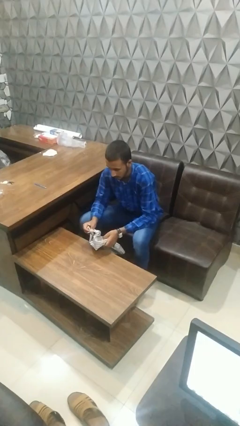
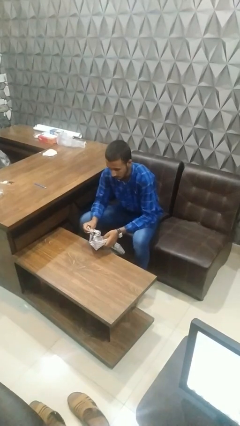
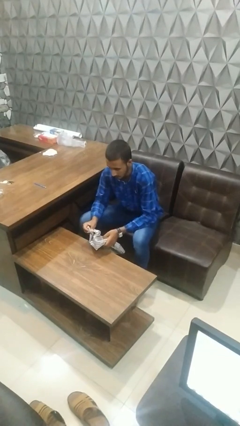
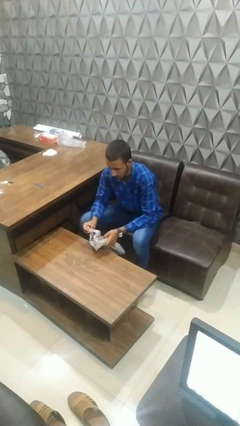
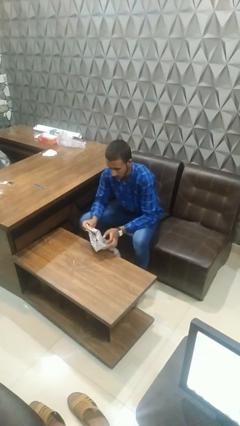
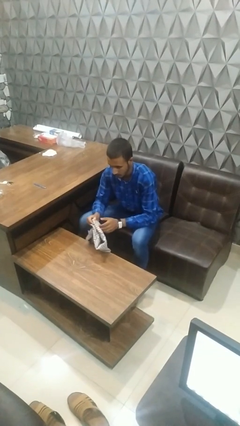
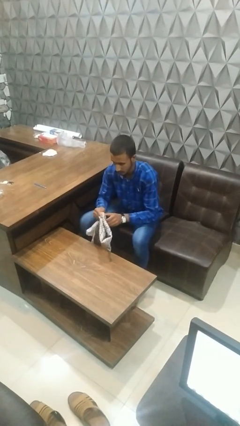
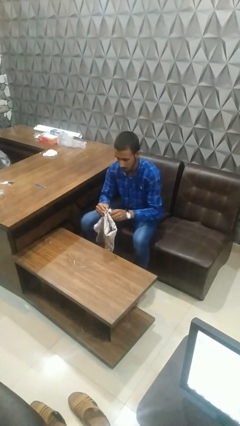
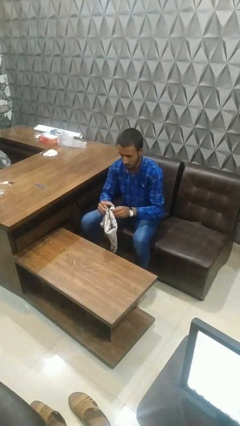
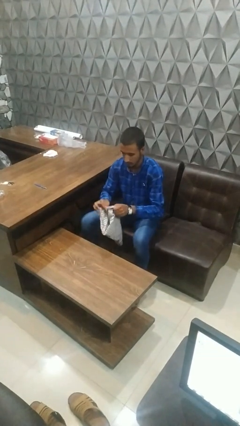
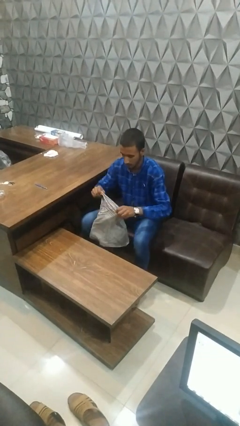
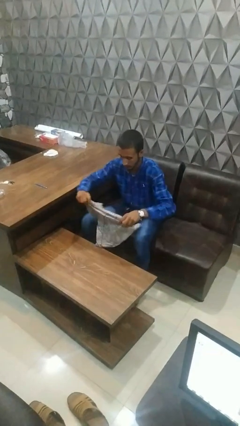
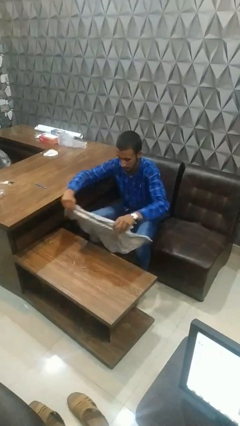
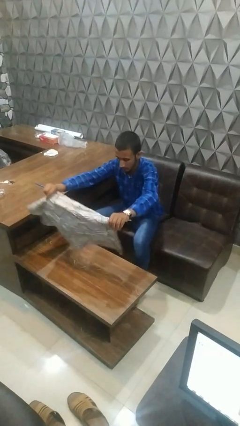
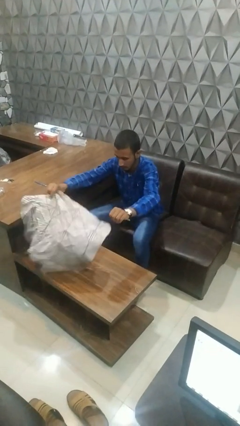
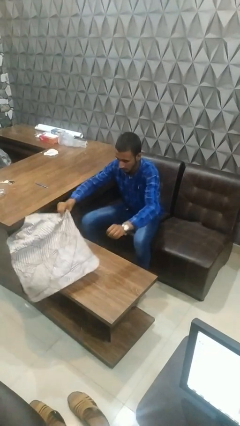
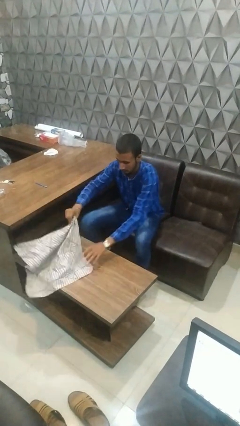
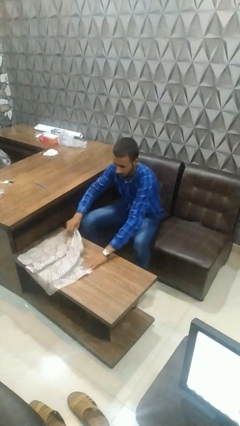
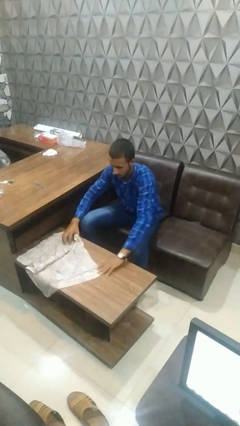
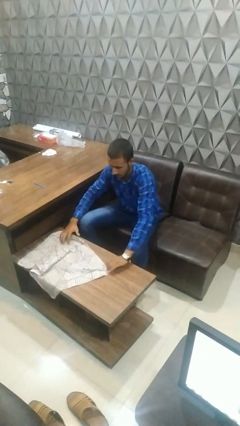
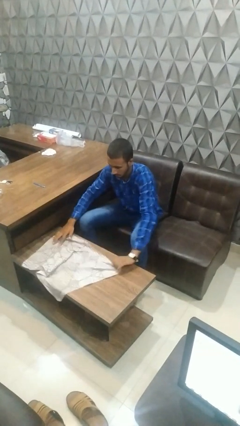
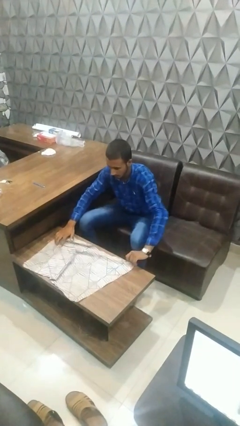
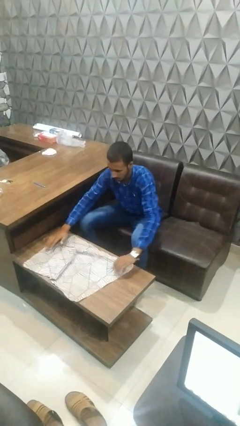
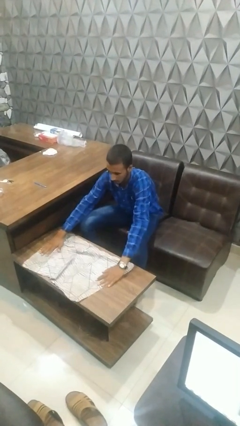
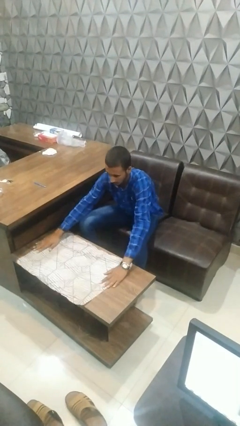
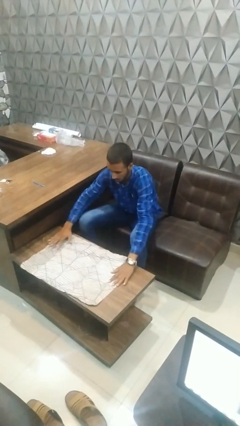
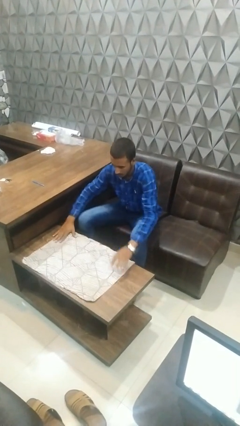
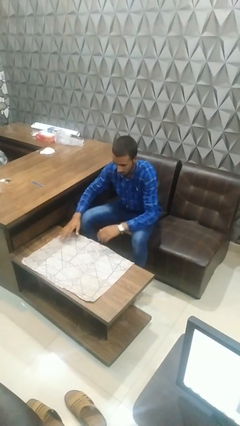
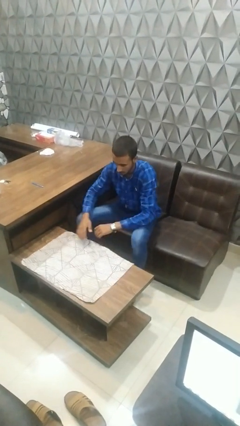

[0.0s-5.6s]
person spreads tablecloth

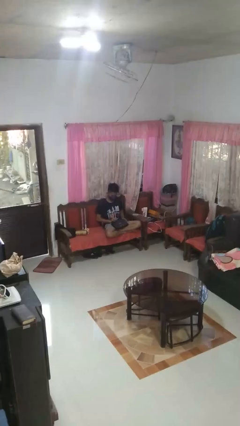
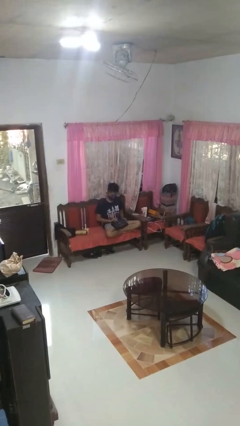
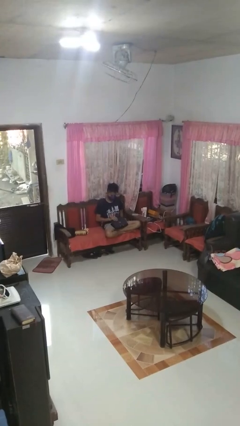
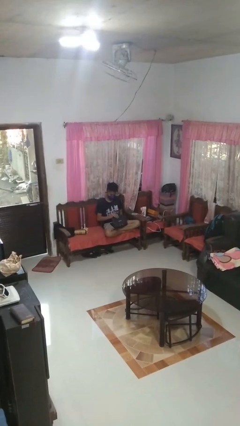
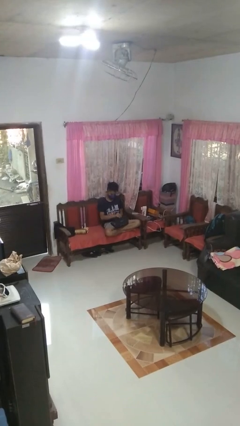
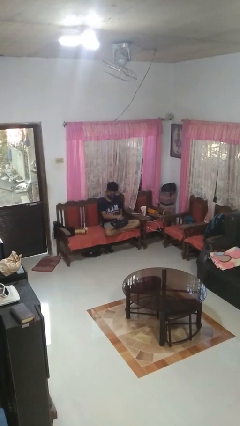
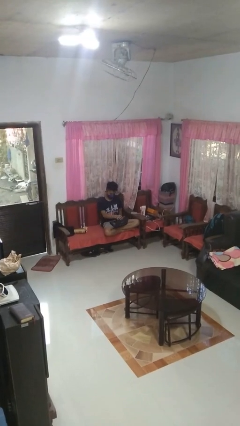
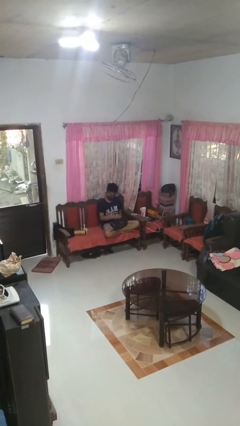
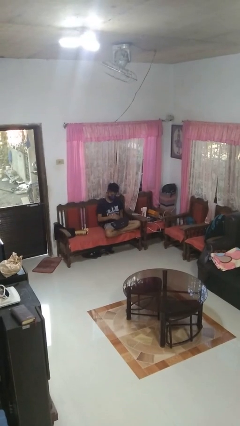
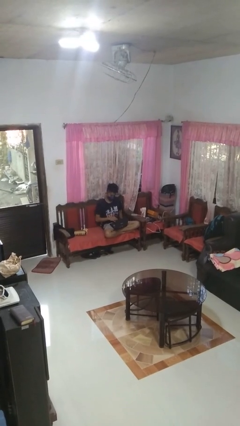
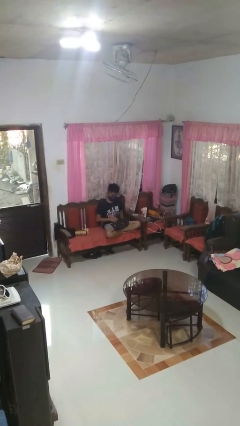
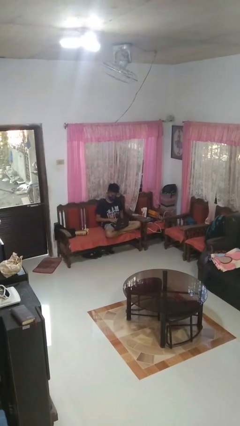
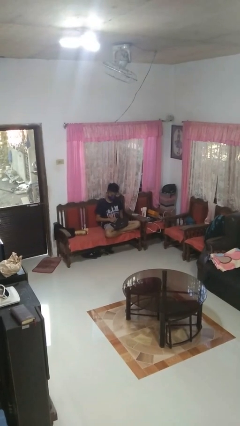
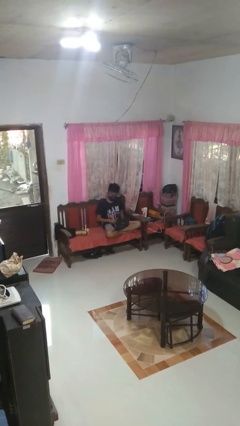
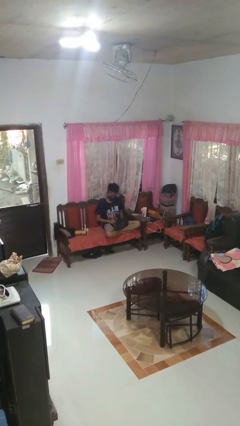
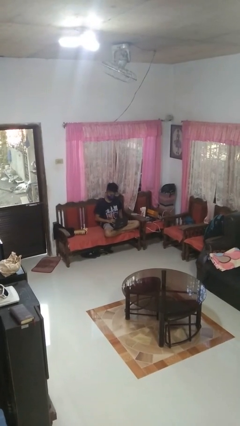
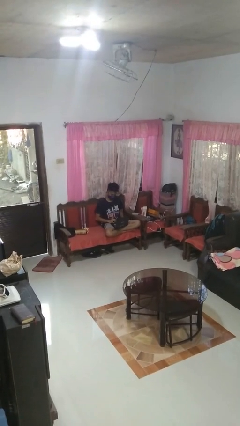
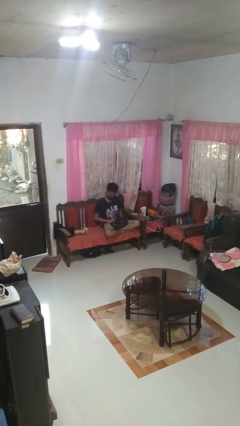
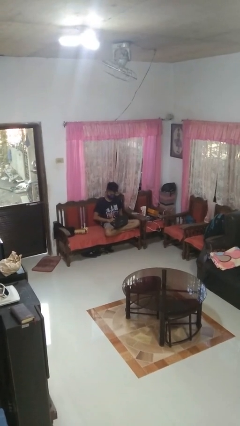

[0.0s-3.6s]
person opens laptop

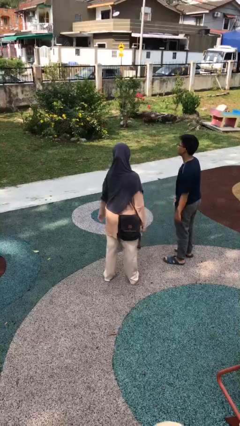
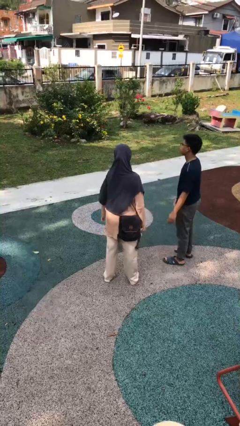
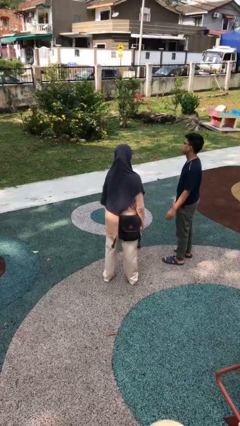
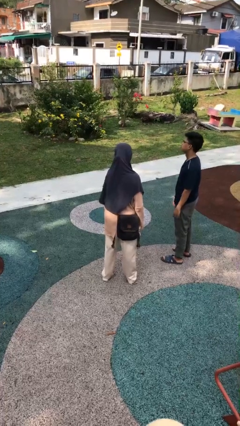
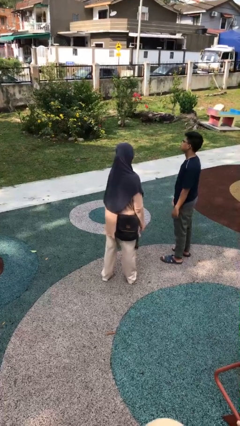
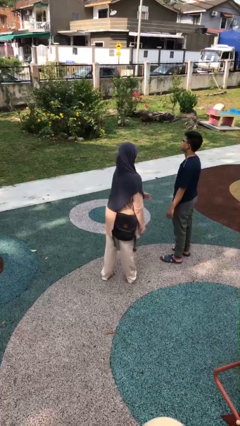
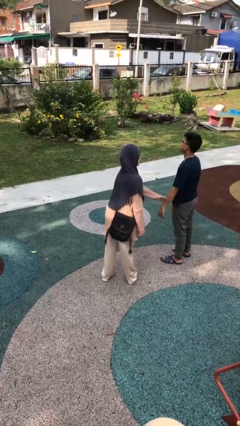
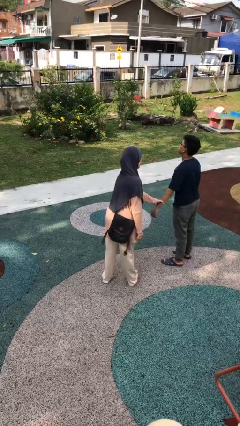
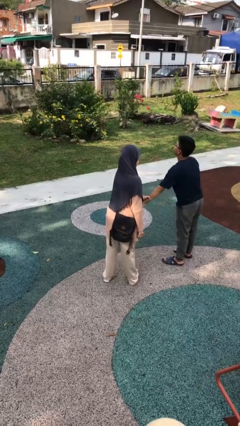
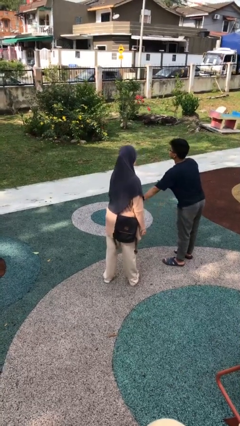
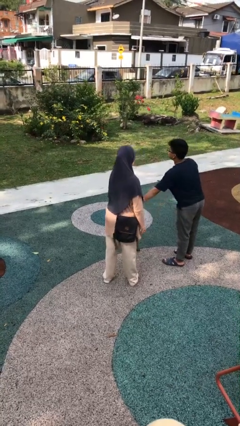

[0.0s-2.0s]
person grabs person by forearm

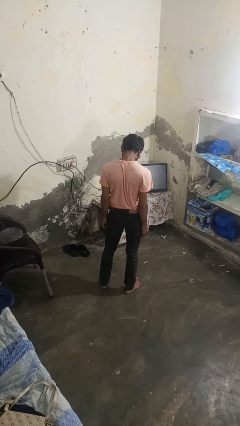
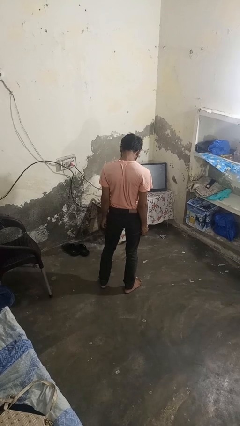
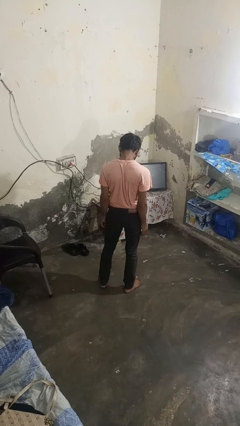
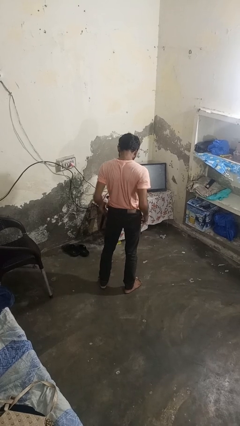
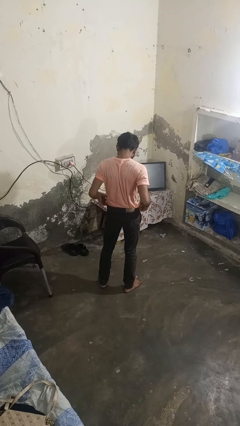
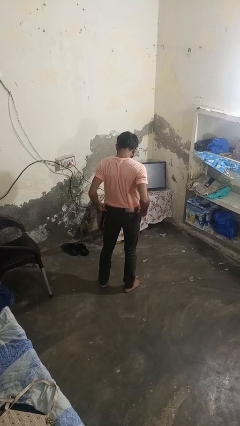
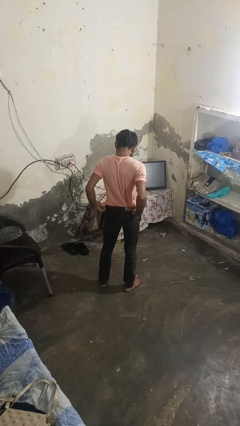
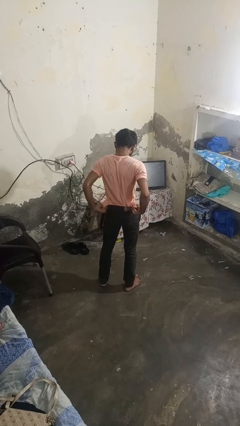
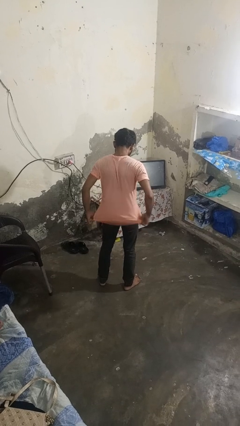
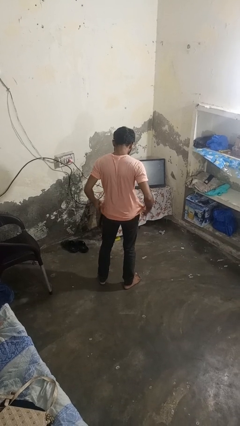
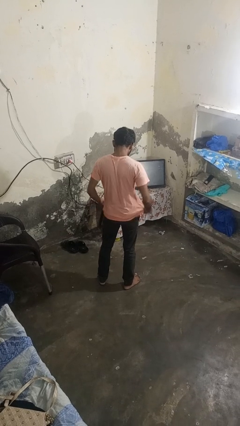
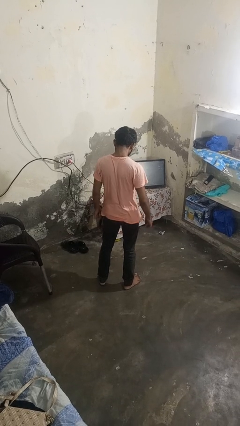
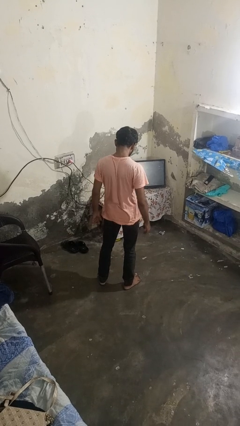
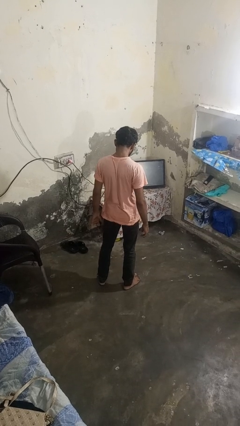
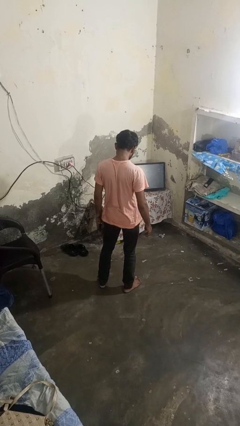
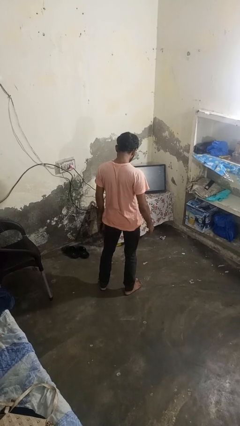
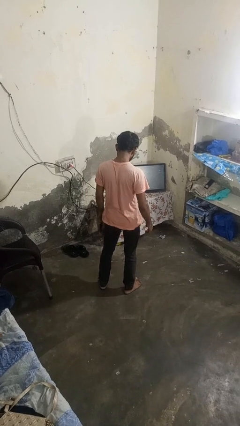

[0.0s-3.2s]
person untucks shirt

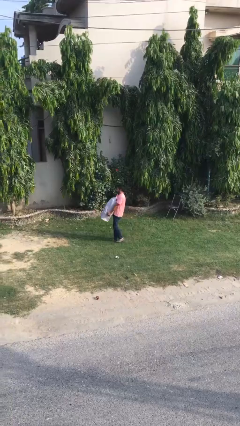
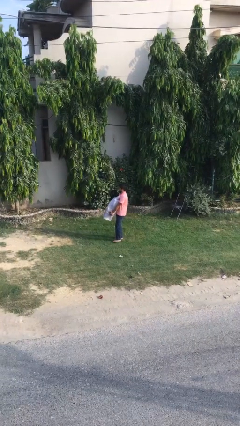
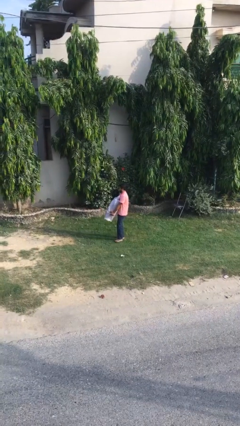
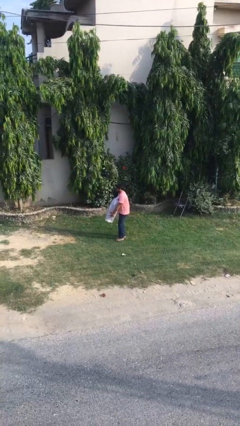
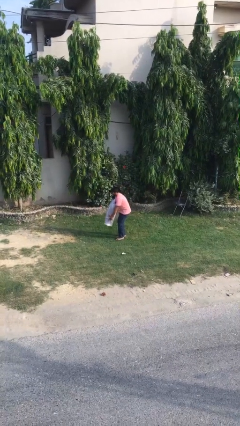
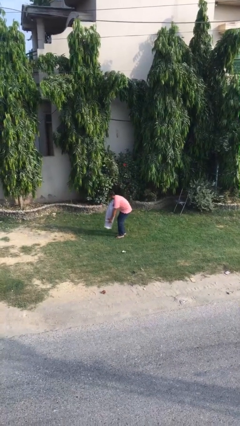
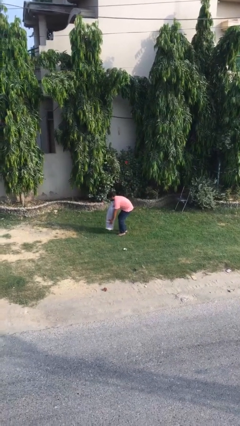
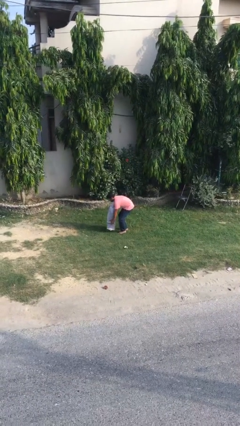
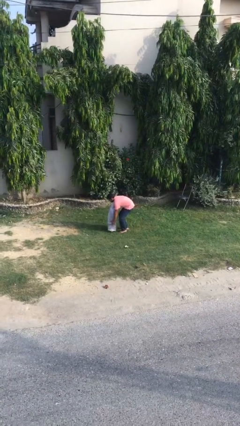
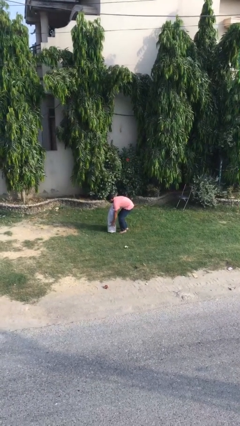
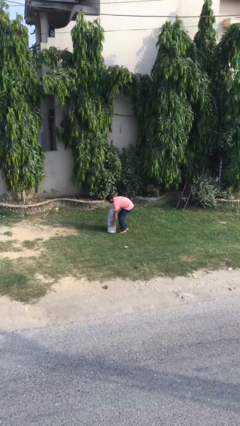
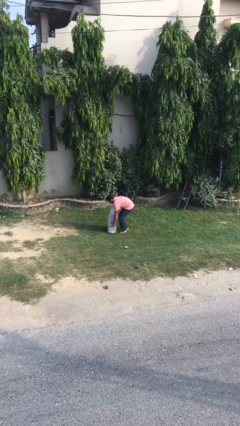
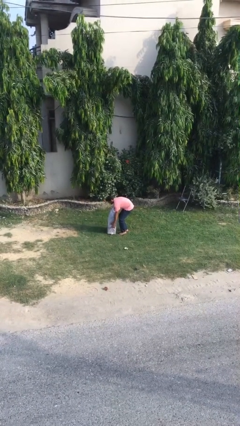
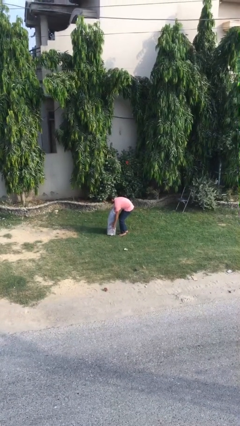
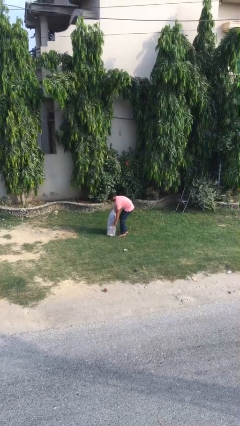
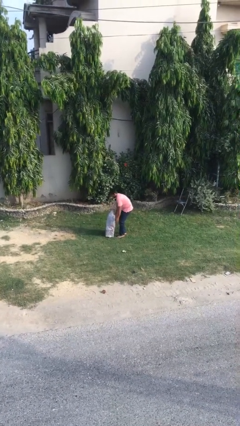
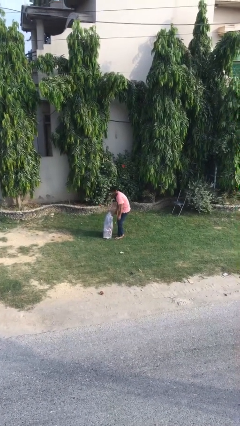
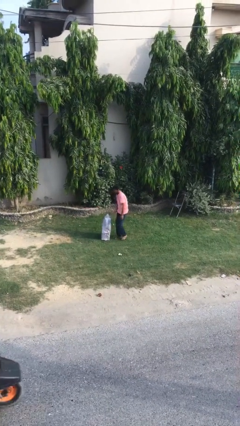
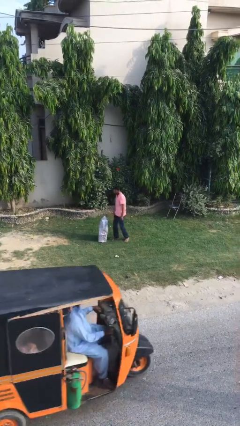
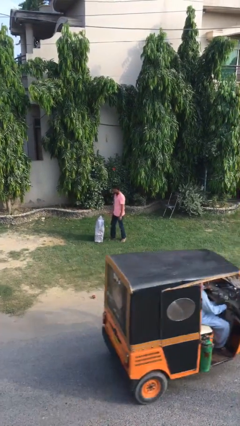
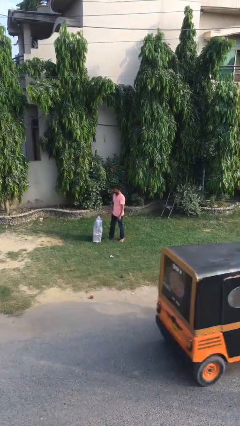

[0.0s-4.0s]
person puts down object on floor
